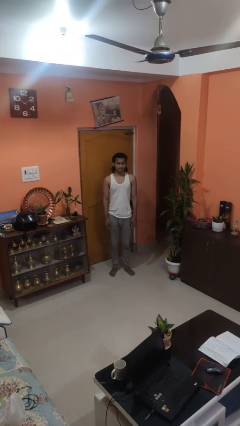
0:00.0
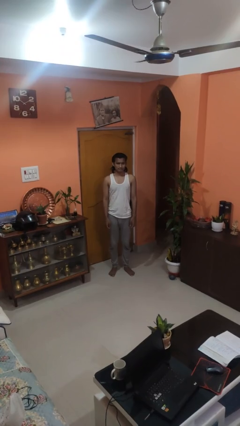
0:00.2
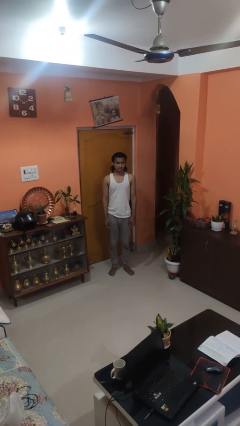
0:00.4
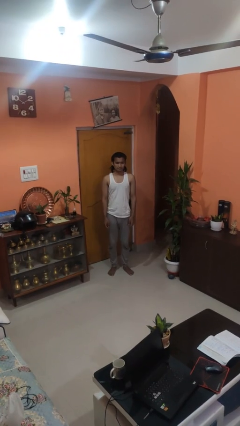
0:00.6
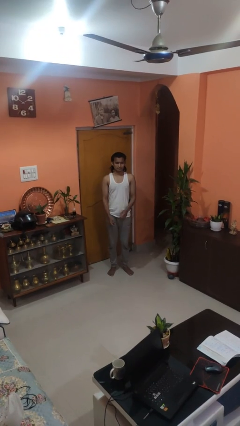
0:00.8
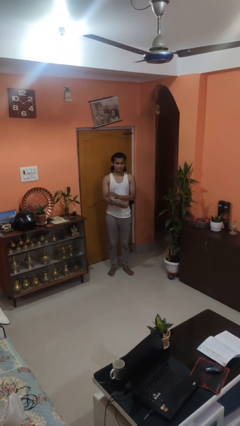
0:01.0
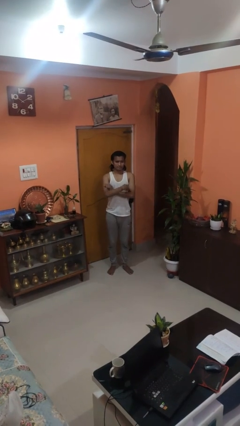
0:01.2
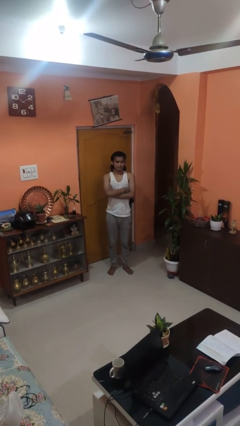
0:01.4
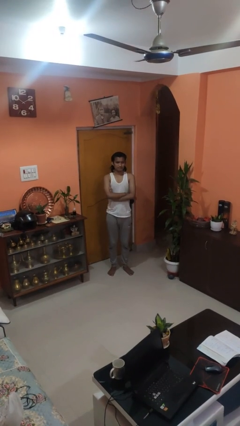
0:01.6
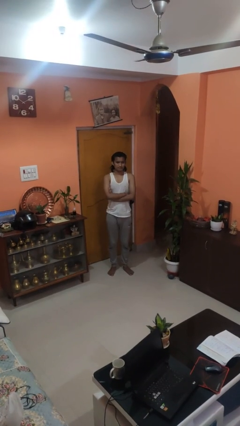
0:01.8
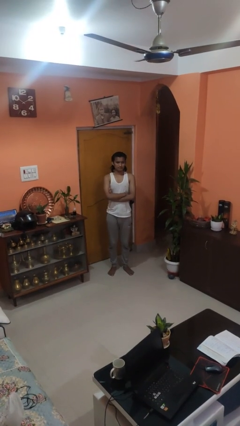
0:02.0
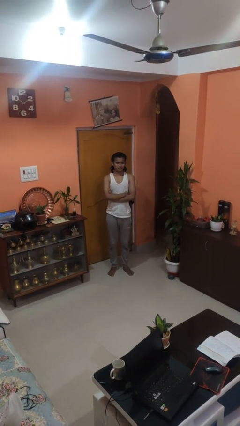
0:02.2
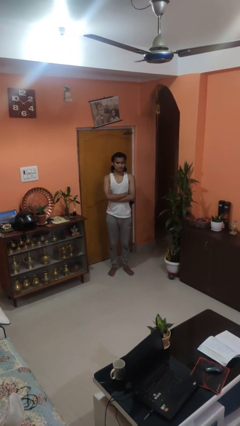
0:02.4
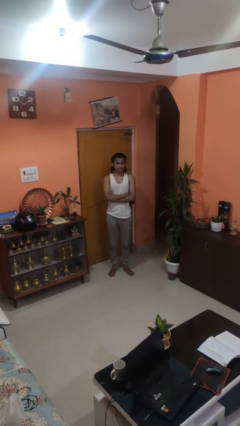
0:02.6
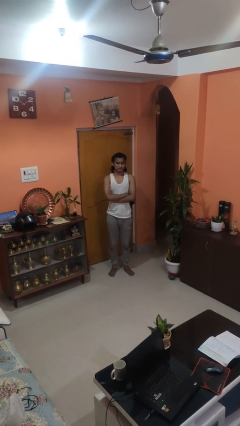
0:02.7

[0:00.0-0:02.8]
person crosses arms

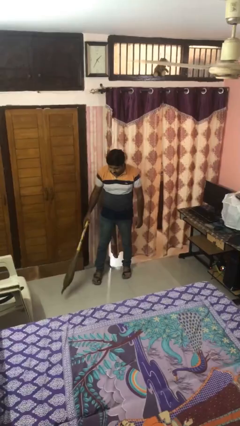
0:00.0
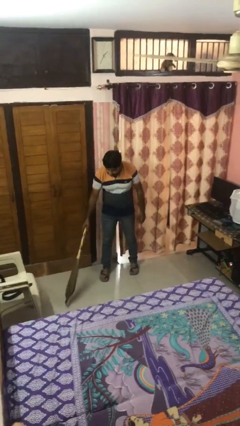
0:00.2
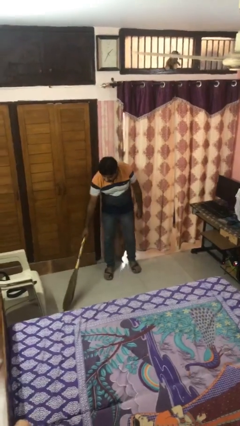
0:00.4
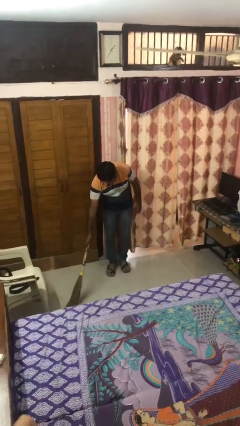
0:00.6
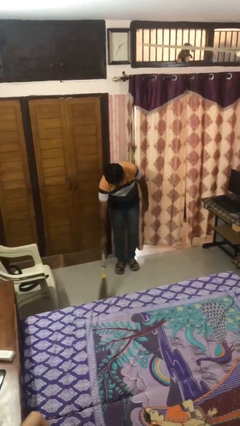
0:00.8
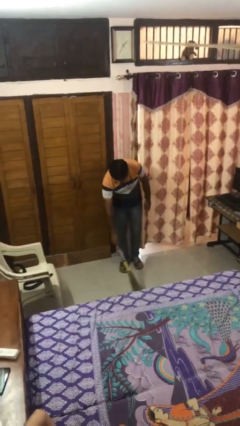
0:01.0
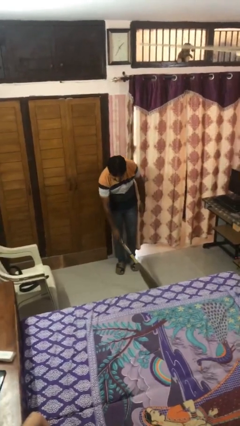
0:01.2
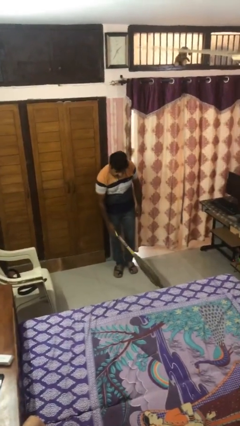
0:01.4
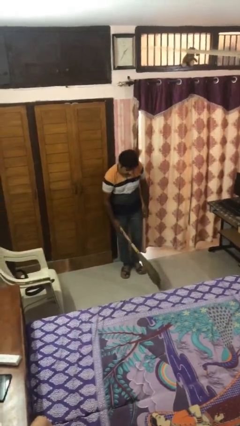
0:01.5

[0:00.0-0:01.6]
person sweeps floor

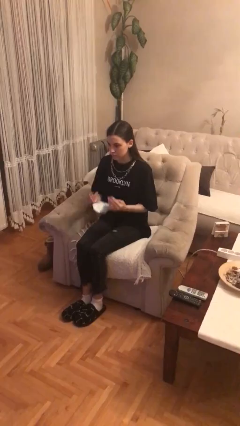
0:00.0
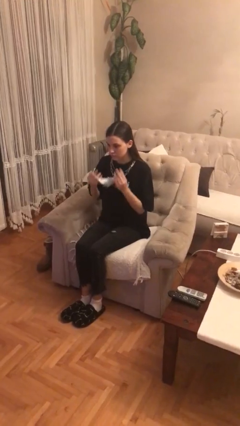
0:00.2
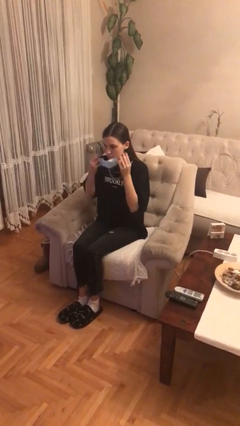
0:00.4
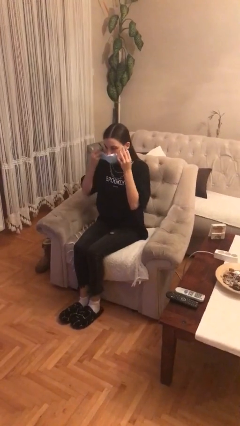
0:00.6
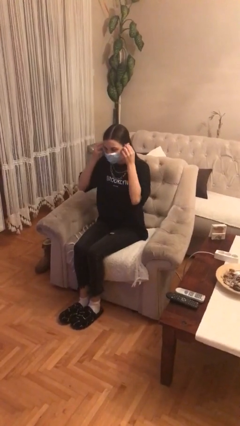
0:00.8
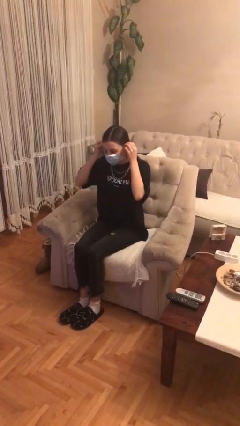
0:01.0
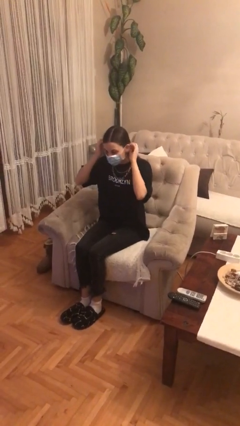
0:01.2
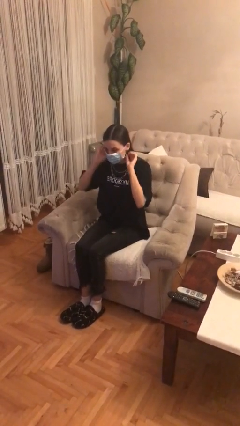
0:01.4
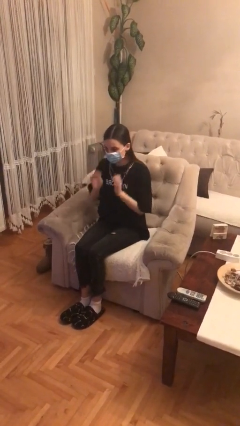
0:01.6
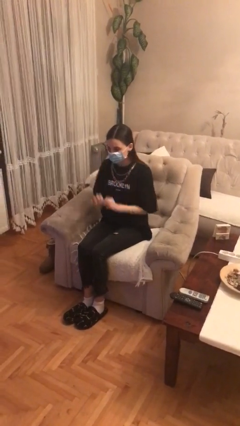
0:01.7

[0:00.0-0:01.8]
person puts on facemask

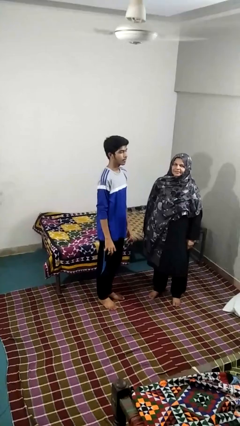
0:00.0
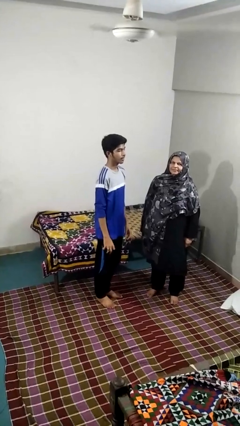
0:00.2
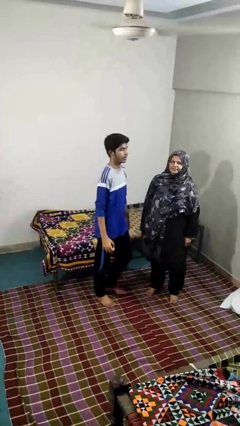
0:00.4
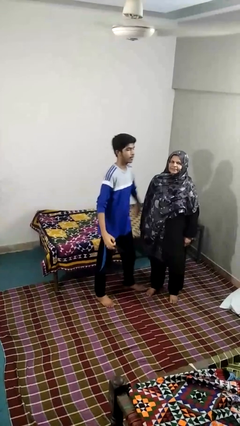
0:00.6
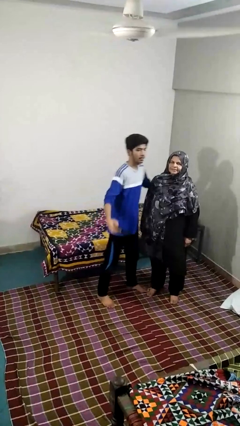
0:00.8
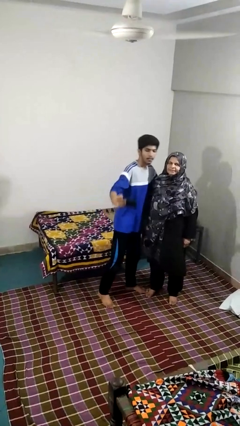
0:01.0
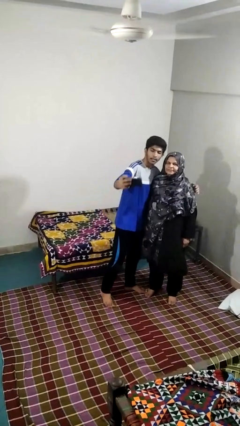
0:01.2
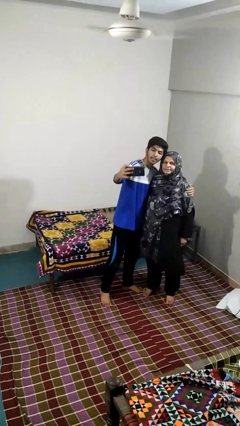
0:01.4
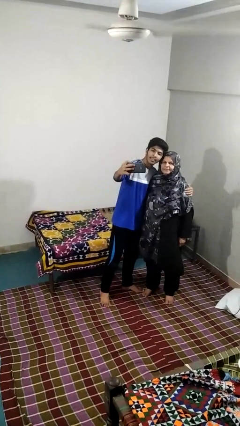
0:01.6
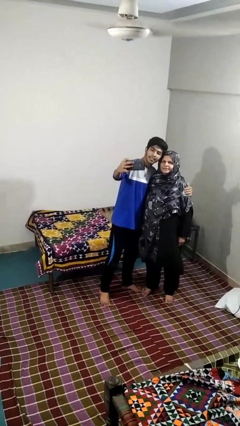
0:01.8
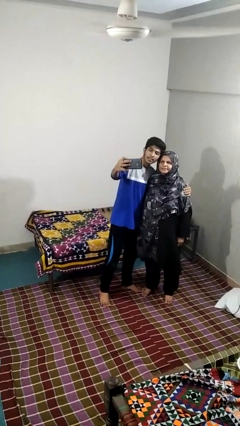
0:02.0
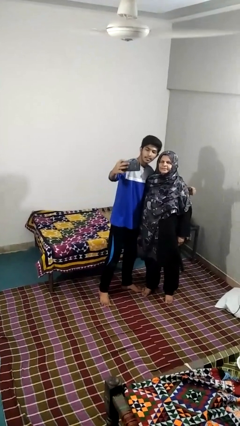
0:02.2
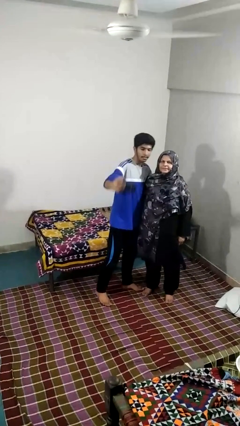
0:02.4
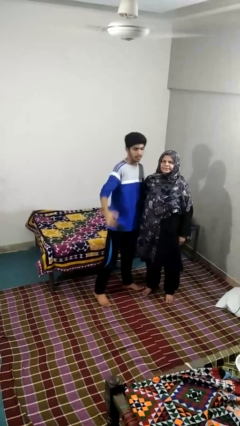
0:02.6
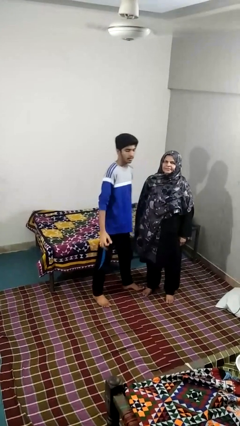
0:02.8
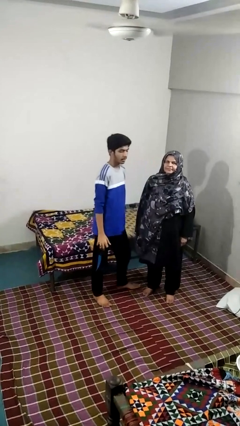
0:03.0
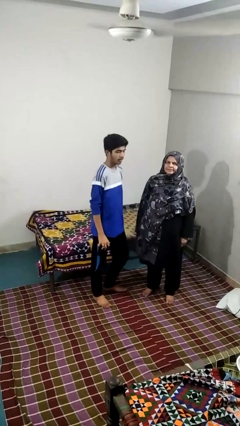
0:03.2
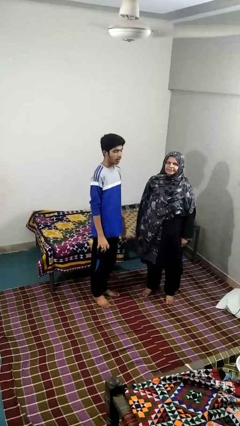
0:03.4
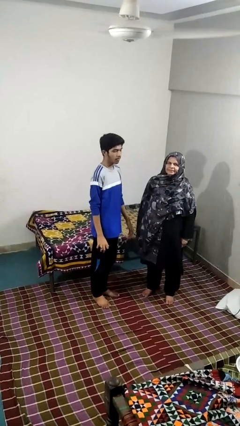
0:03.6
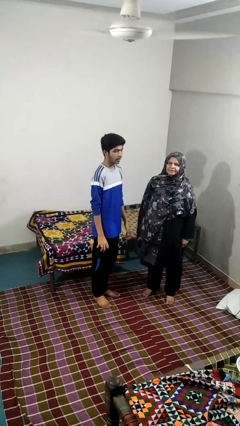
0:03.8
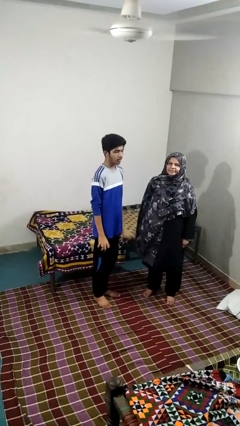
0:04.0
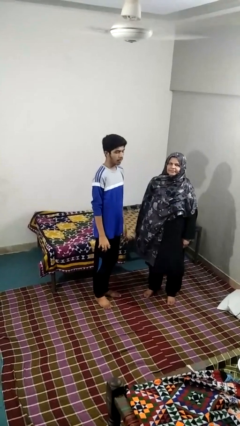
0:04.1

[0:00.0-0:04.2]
person takes selfie with person

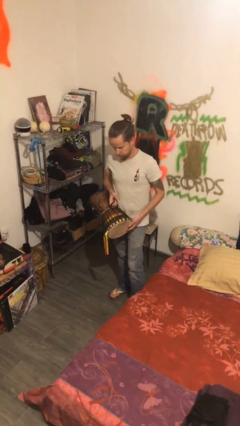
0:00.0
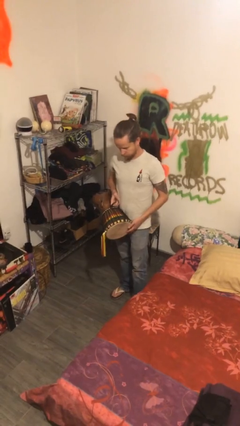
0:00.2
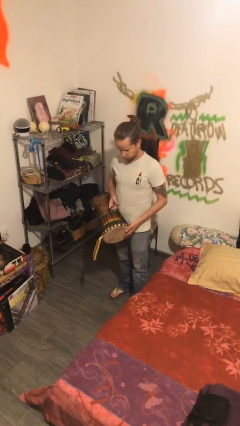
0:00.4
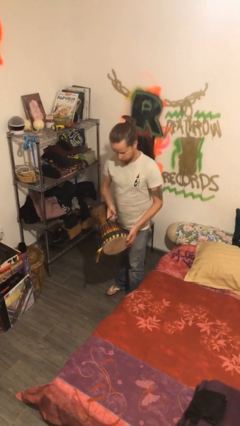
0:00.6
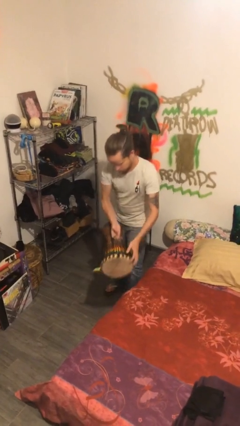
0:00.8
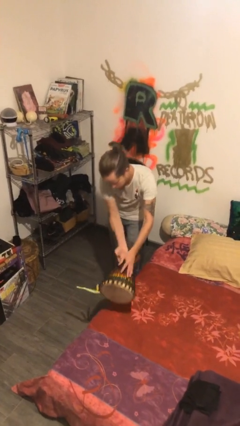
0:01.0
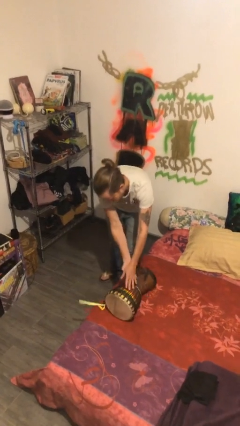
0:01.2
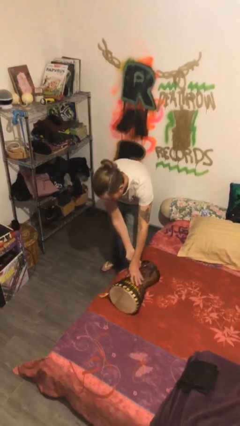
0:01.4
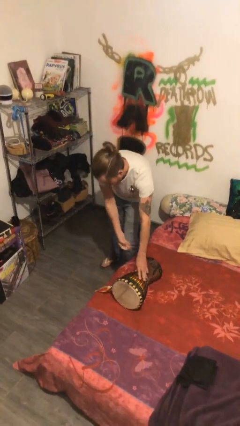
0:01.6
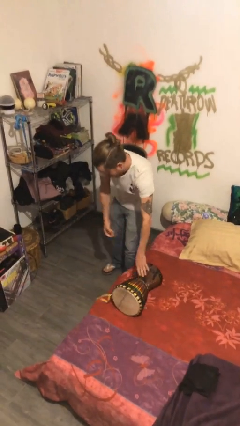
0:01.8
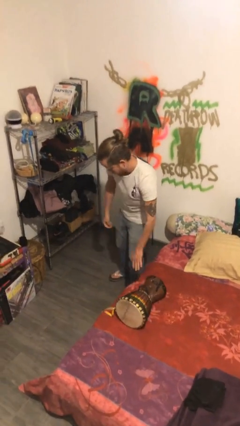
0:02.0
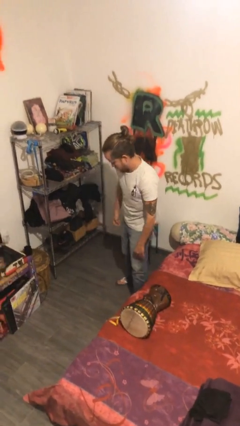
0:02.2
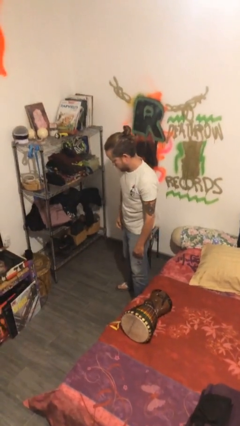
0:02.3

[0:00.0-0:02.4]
person puts down object on bed

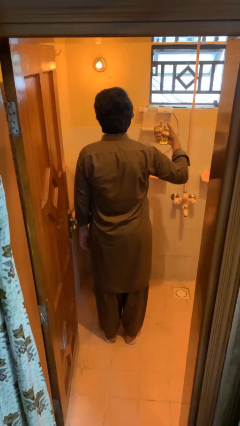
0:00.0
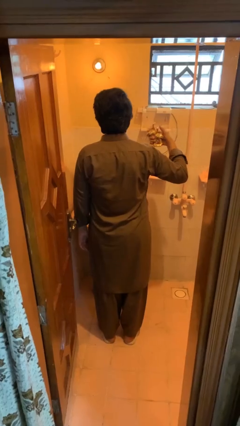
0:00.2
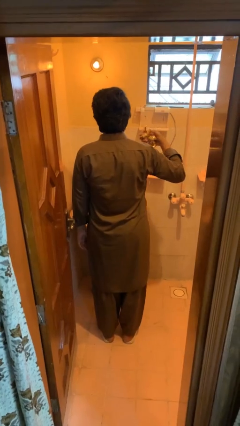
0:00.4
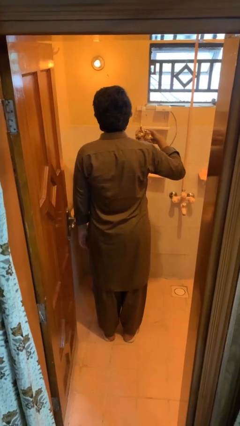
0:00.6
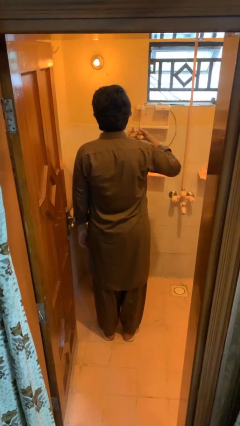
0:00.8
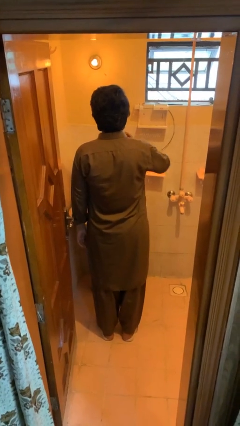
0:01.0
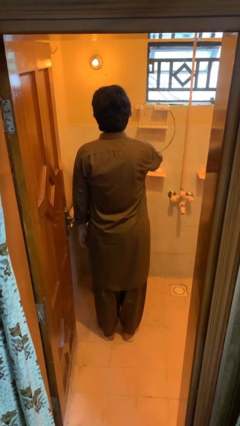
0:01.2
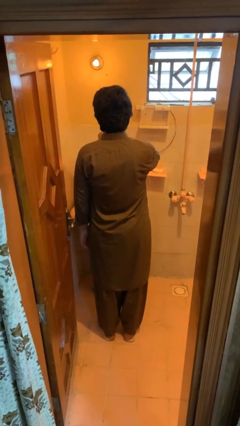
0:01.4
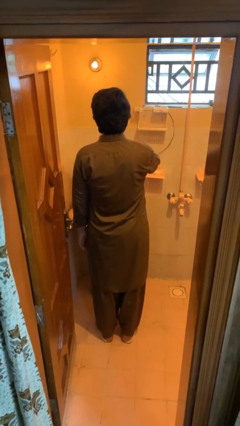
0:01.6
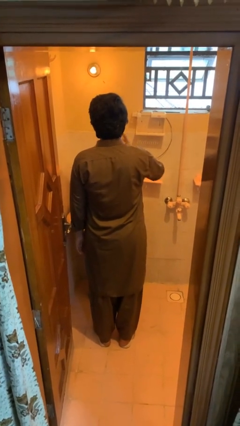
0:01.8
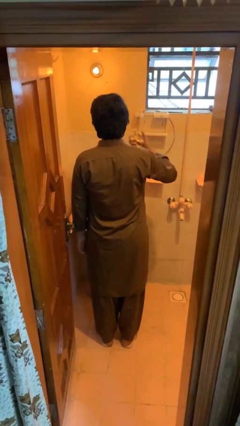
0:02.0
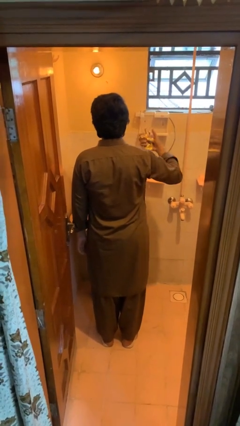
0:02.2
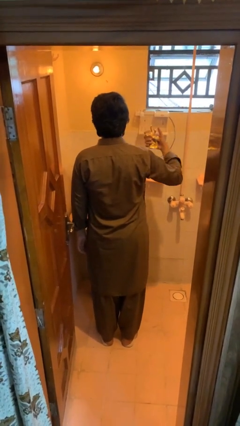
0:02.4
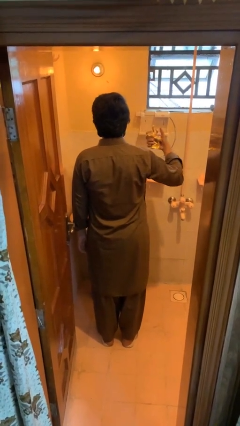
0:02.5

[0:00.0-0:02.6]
person applies deodorant

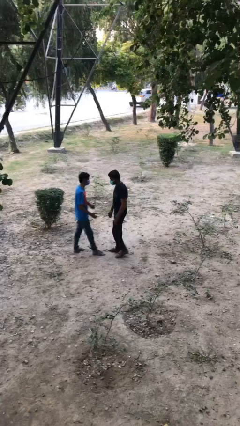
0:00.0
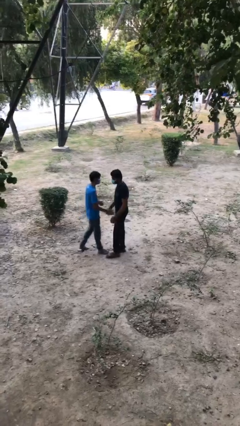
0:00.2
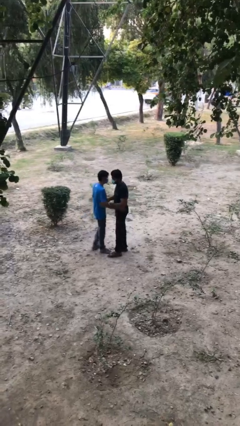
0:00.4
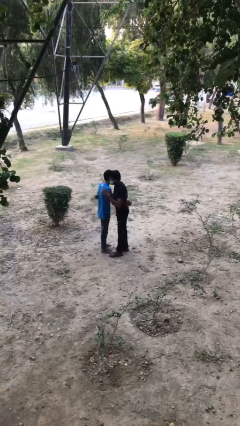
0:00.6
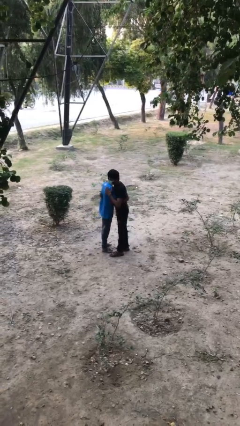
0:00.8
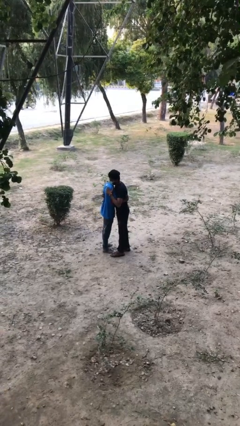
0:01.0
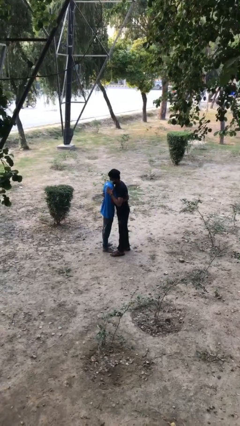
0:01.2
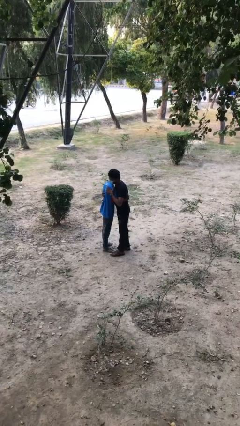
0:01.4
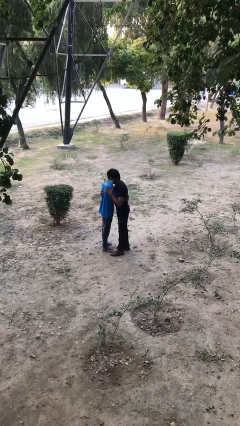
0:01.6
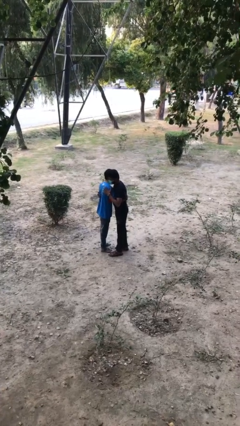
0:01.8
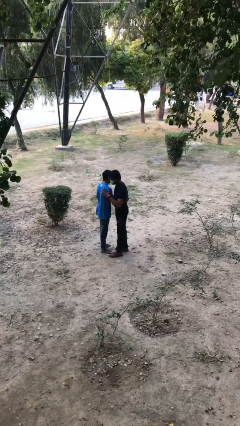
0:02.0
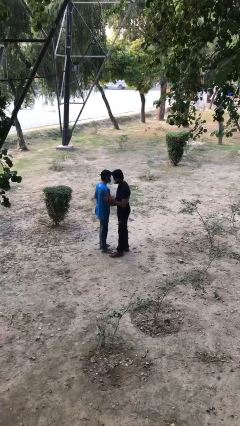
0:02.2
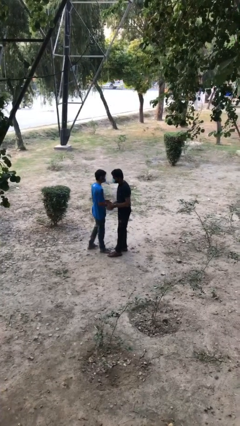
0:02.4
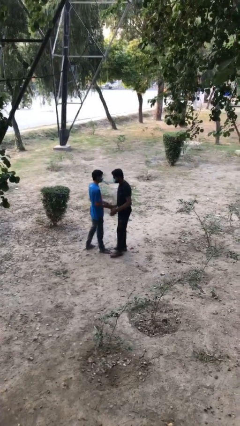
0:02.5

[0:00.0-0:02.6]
person embraces person
